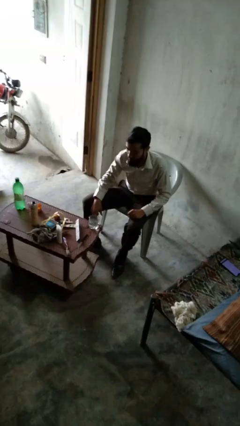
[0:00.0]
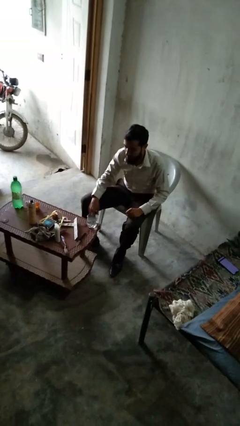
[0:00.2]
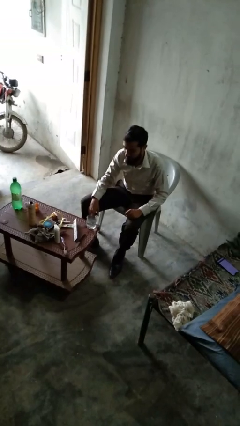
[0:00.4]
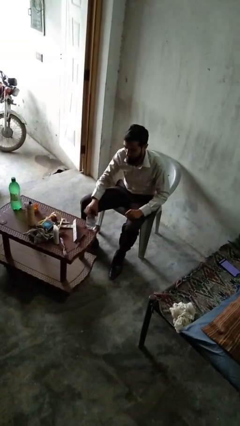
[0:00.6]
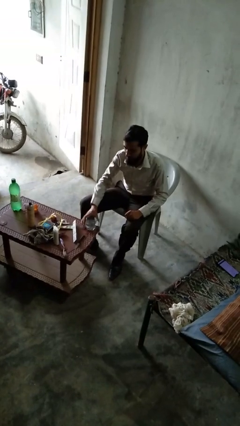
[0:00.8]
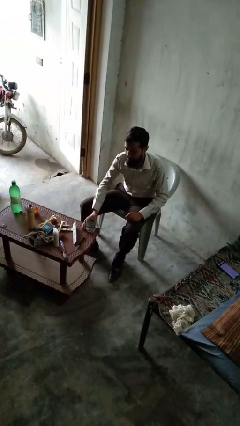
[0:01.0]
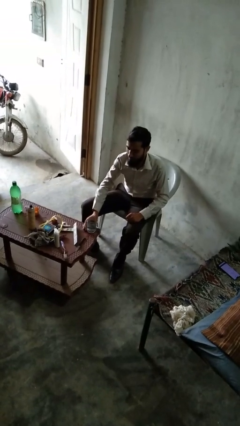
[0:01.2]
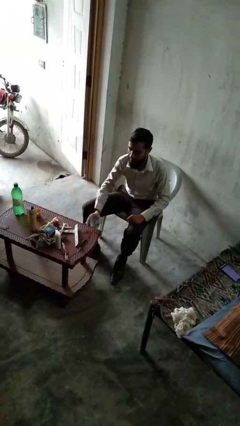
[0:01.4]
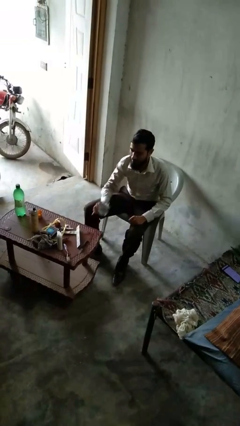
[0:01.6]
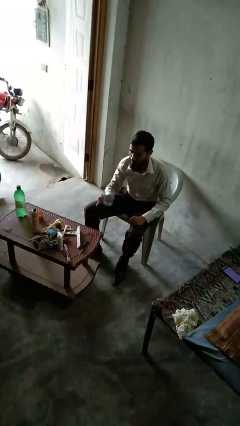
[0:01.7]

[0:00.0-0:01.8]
person picks up object from table

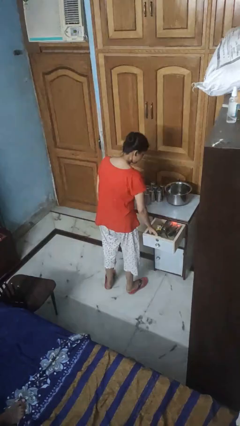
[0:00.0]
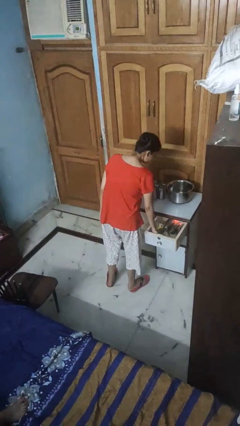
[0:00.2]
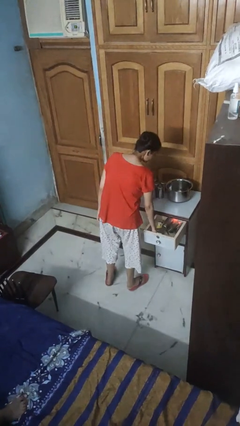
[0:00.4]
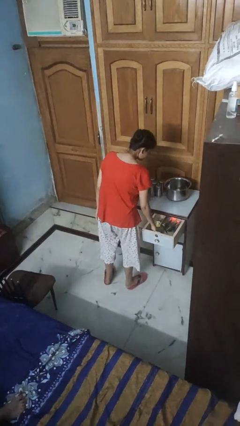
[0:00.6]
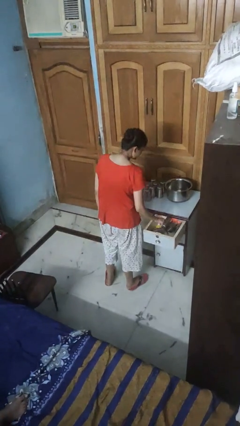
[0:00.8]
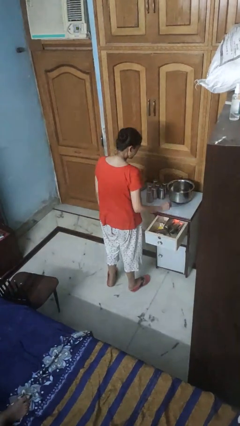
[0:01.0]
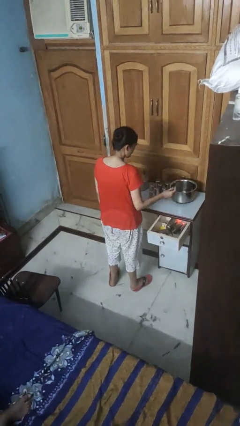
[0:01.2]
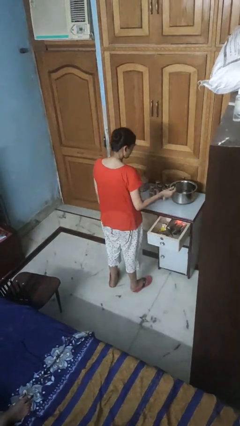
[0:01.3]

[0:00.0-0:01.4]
person takes object from kitchen drawer

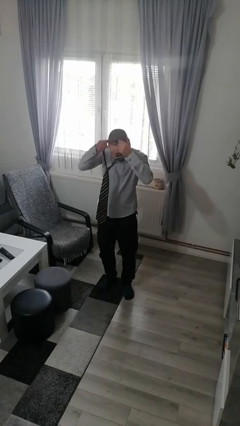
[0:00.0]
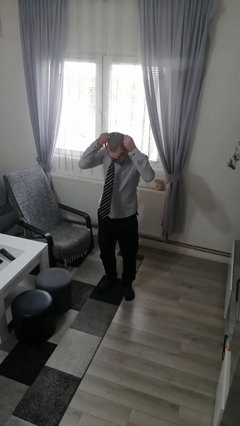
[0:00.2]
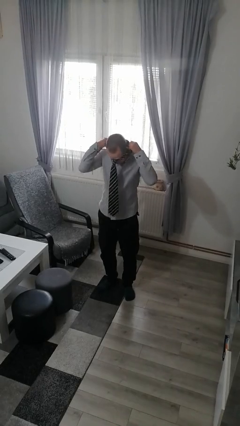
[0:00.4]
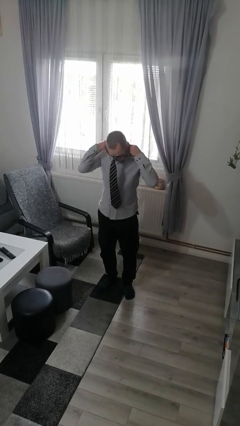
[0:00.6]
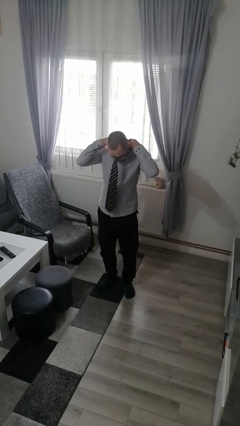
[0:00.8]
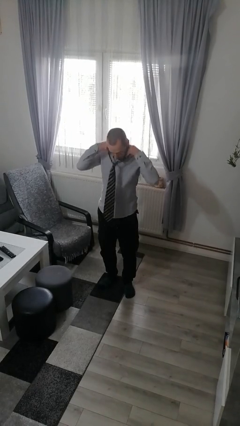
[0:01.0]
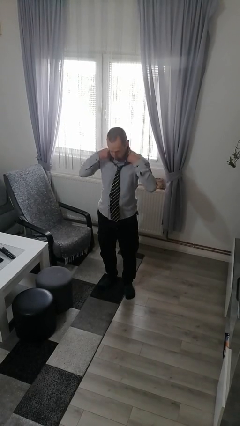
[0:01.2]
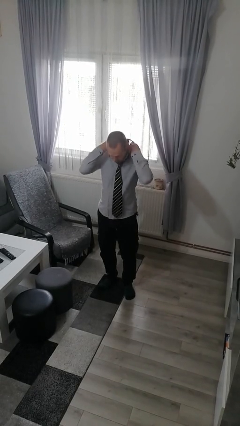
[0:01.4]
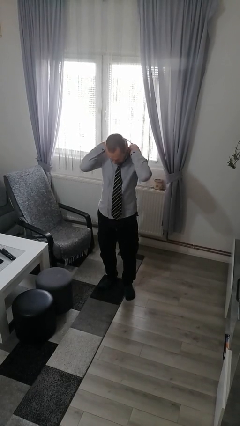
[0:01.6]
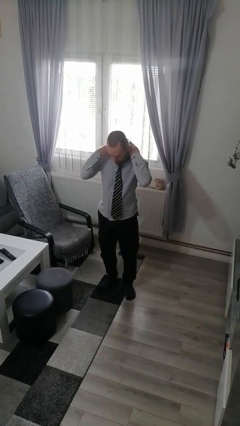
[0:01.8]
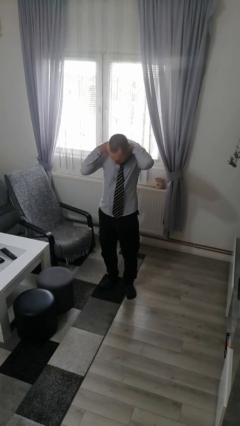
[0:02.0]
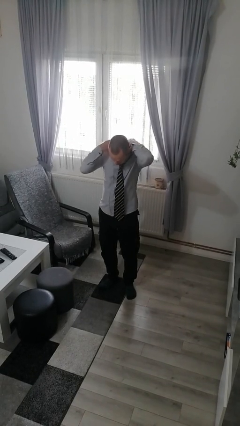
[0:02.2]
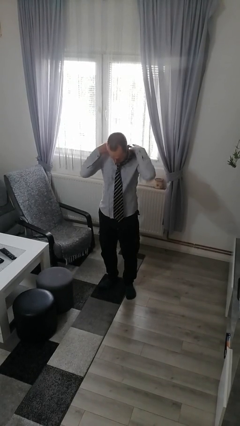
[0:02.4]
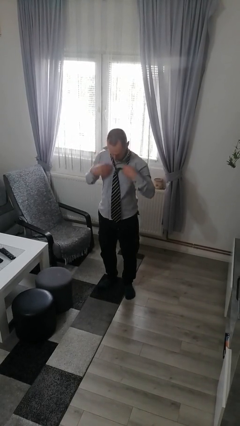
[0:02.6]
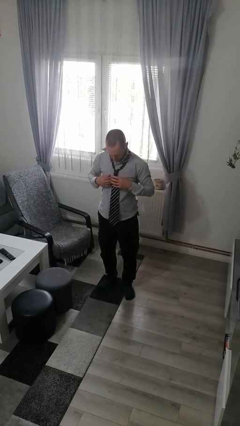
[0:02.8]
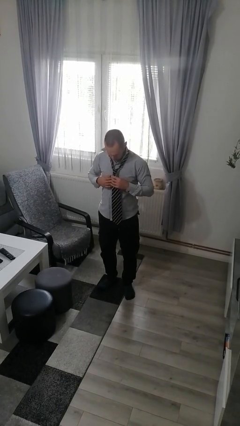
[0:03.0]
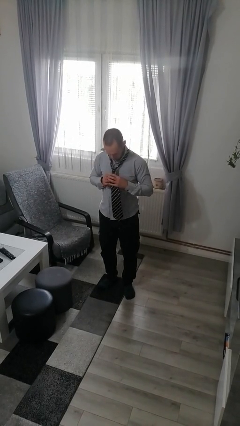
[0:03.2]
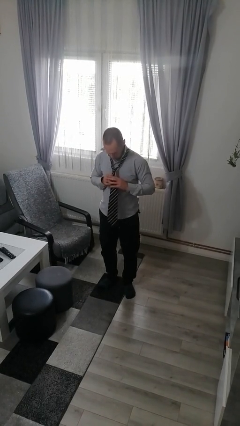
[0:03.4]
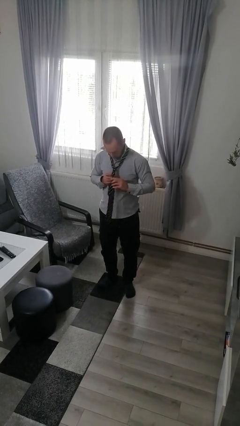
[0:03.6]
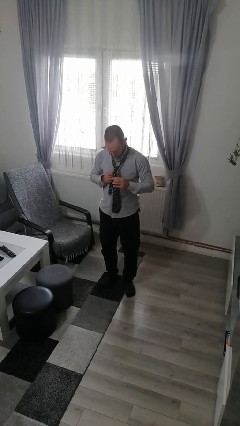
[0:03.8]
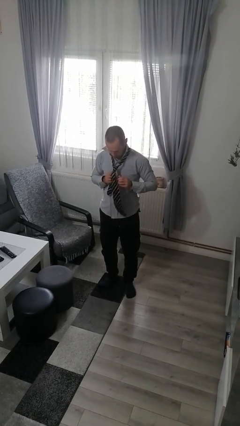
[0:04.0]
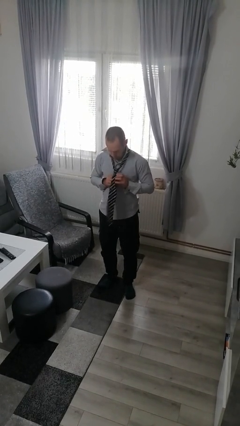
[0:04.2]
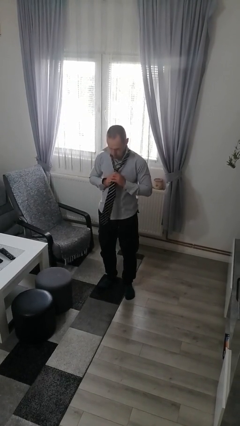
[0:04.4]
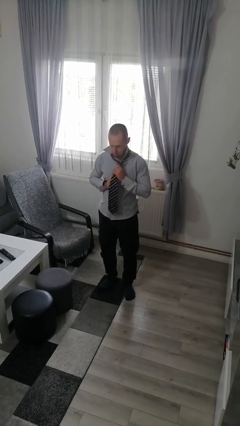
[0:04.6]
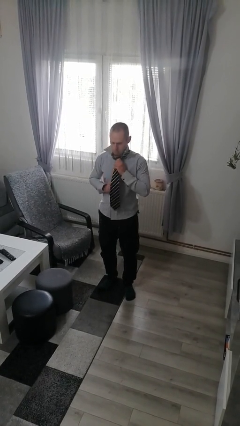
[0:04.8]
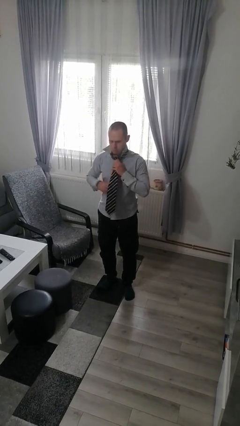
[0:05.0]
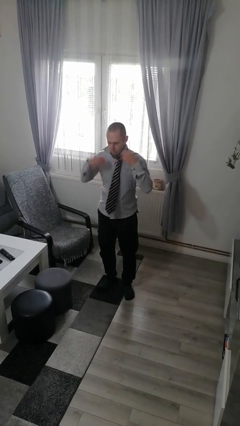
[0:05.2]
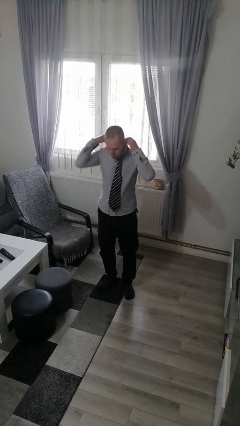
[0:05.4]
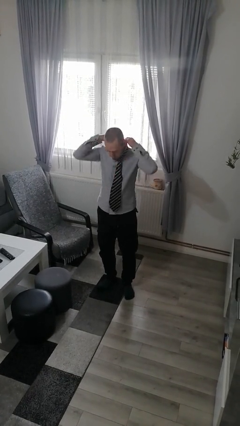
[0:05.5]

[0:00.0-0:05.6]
person puts on necktie

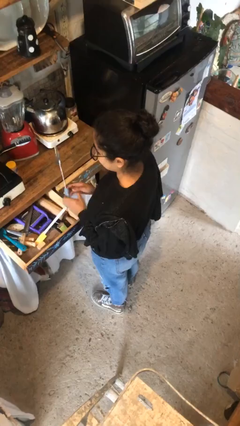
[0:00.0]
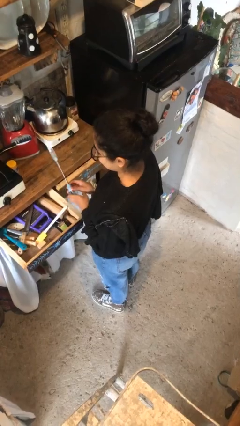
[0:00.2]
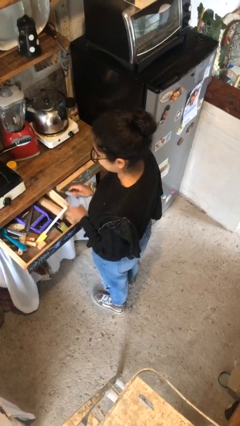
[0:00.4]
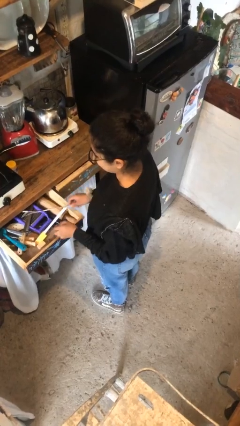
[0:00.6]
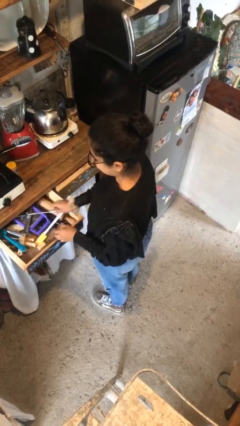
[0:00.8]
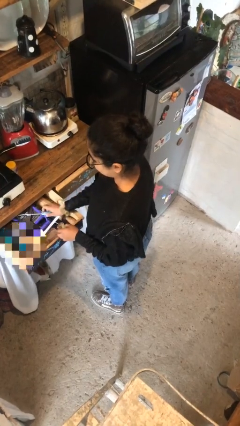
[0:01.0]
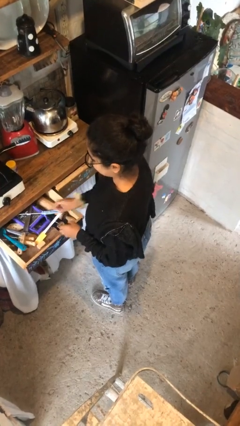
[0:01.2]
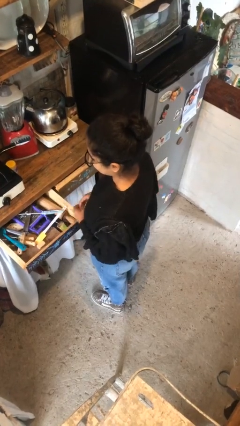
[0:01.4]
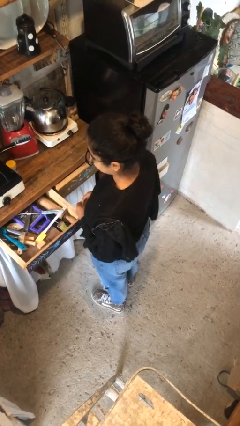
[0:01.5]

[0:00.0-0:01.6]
person puts object into kitchen drawer

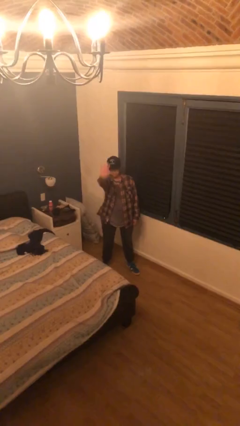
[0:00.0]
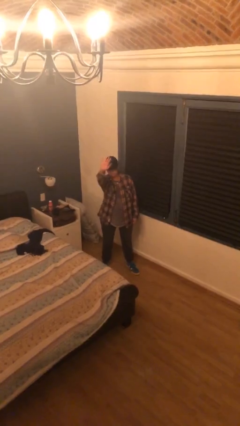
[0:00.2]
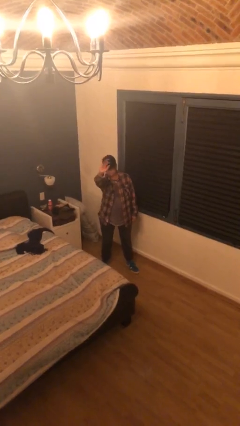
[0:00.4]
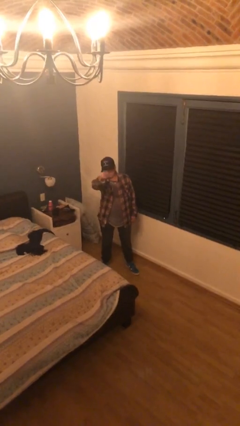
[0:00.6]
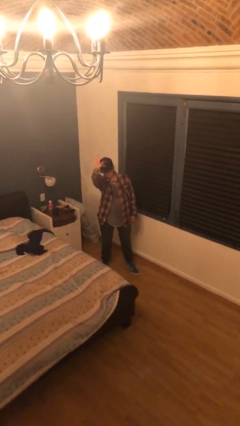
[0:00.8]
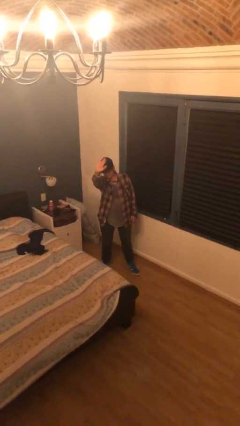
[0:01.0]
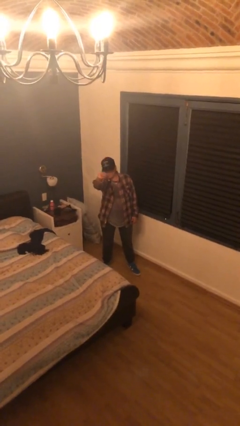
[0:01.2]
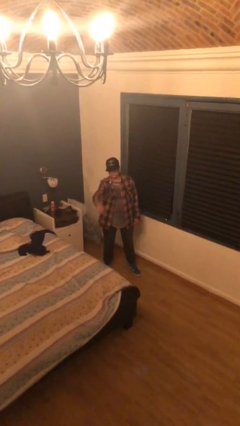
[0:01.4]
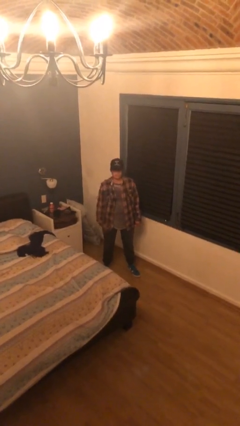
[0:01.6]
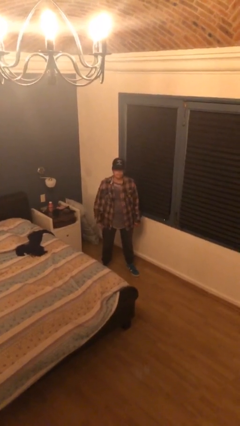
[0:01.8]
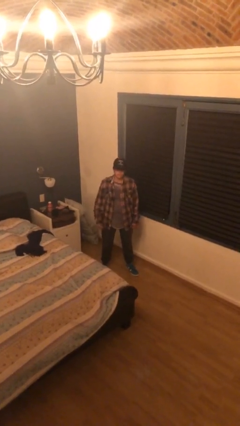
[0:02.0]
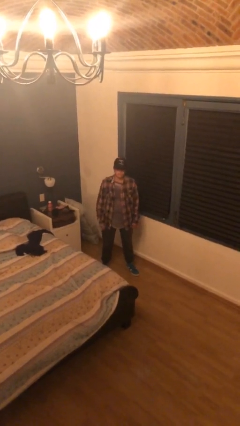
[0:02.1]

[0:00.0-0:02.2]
person waves at person

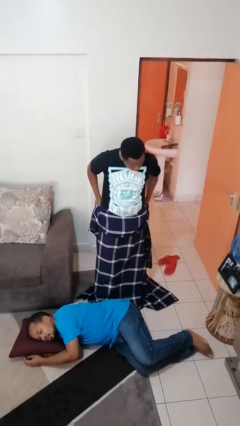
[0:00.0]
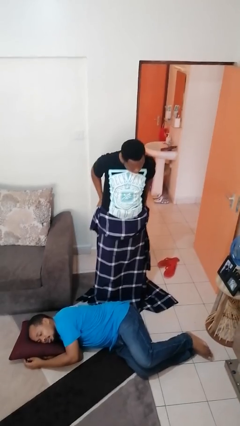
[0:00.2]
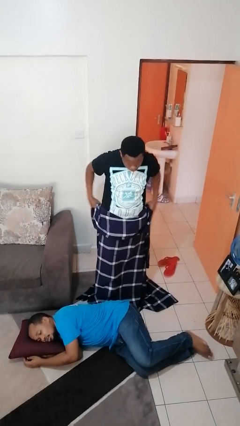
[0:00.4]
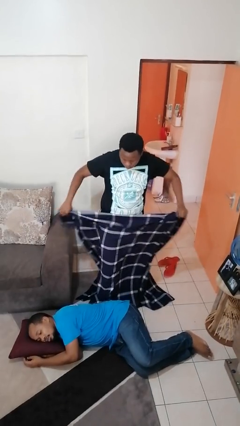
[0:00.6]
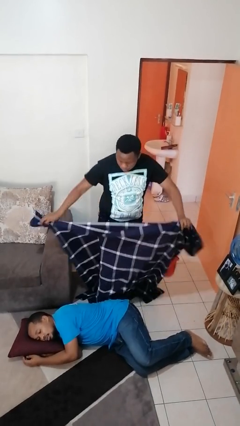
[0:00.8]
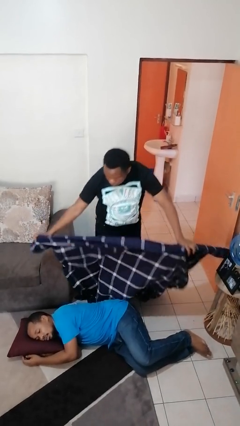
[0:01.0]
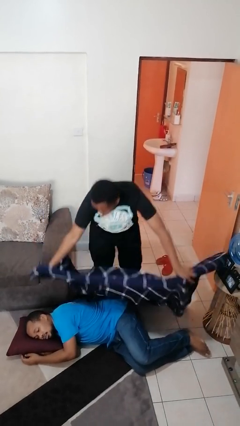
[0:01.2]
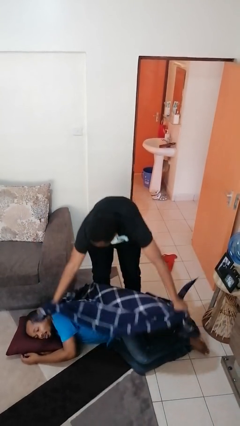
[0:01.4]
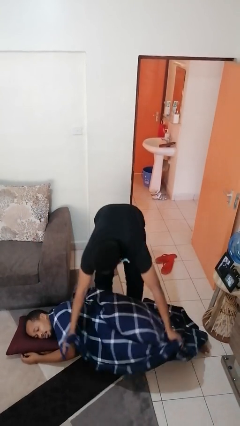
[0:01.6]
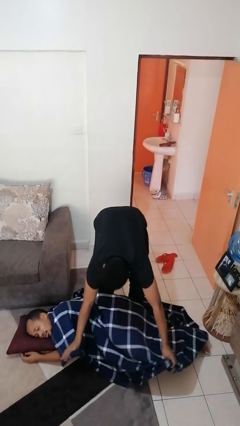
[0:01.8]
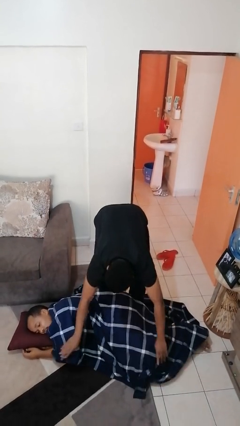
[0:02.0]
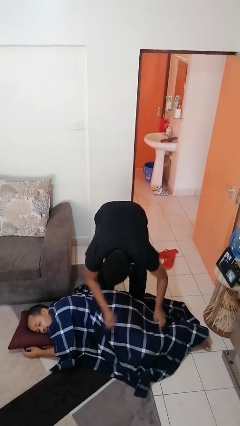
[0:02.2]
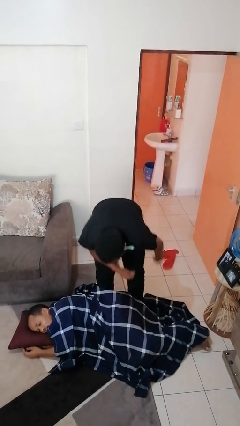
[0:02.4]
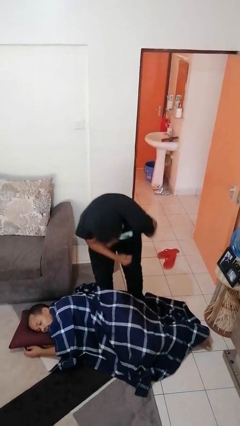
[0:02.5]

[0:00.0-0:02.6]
person covers friend with blanket

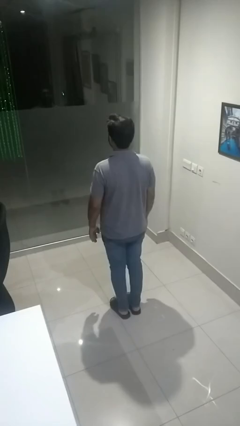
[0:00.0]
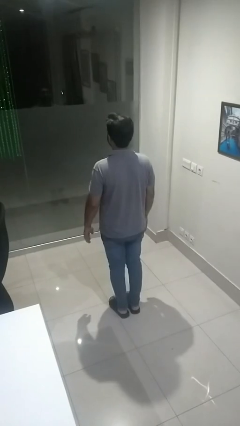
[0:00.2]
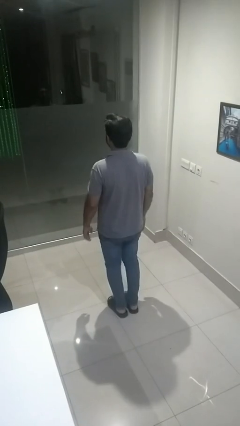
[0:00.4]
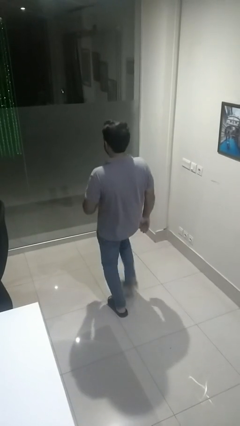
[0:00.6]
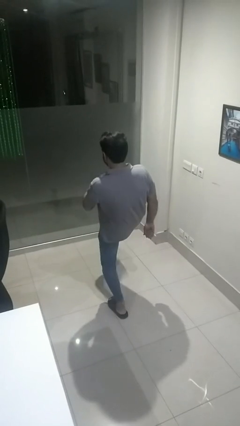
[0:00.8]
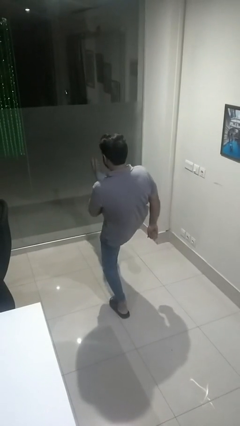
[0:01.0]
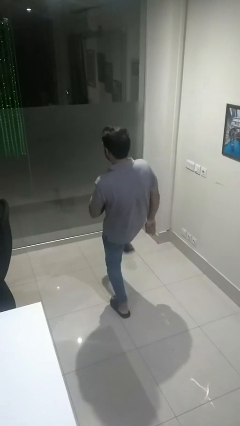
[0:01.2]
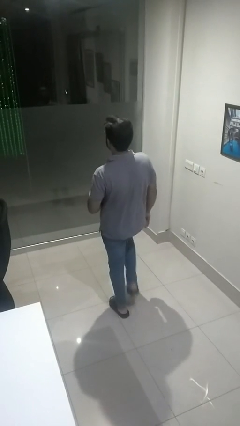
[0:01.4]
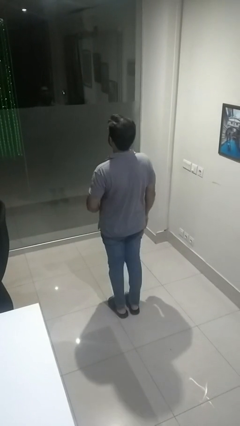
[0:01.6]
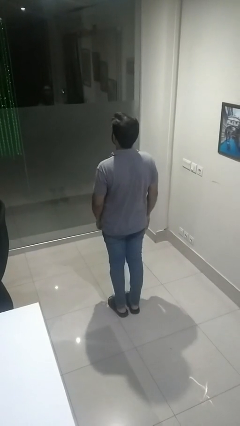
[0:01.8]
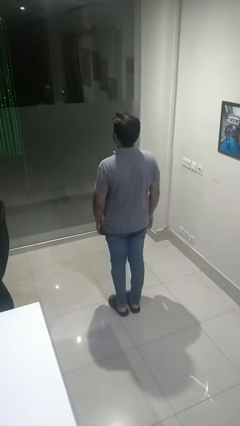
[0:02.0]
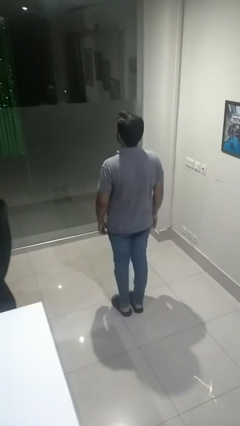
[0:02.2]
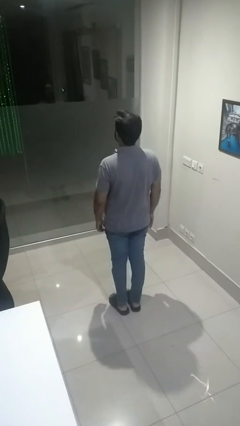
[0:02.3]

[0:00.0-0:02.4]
person karate kicks
